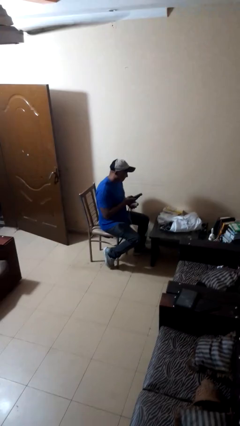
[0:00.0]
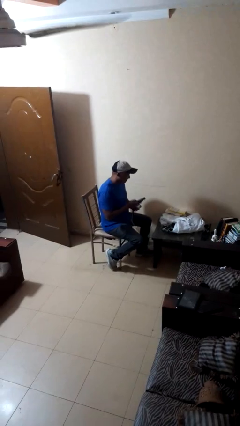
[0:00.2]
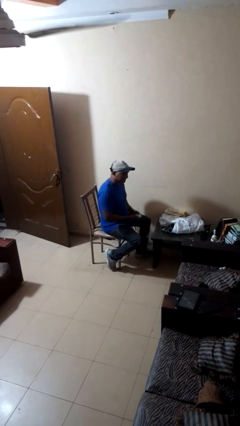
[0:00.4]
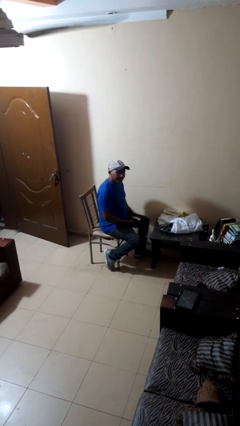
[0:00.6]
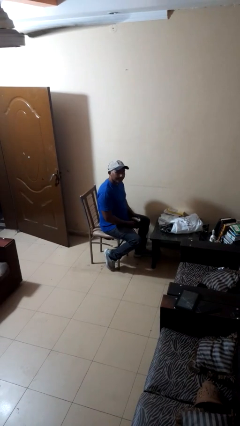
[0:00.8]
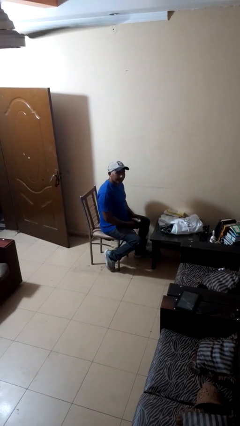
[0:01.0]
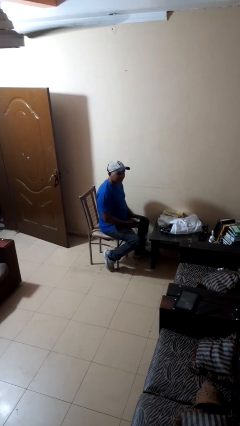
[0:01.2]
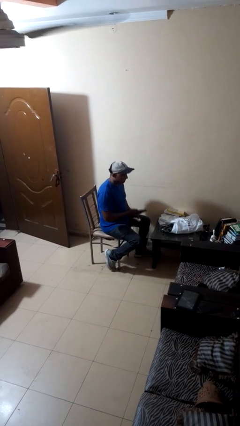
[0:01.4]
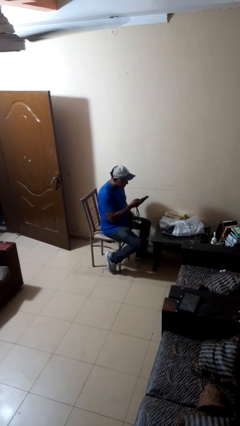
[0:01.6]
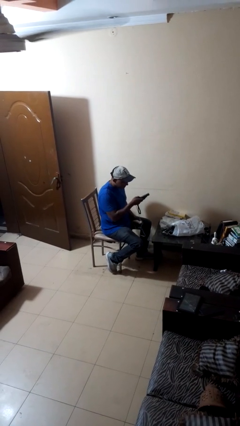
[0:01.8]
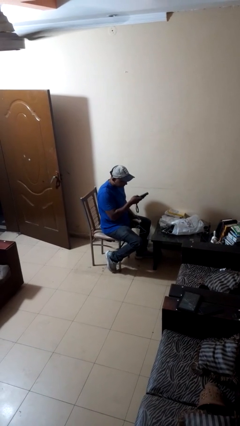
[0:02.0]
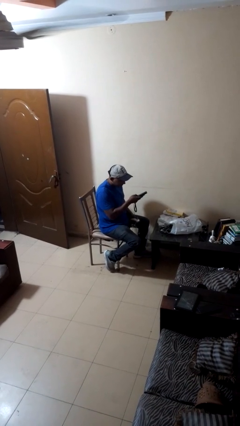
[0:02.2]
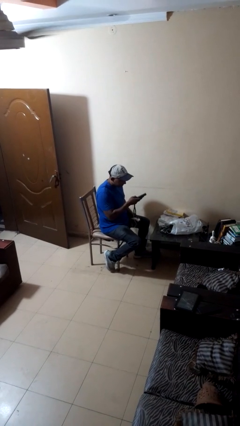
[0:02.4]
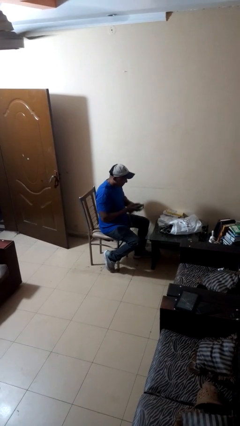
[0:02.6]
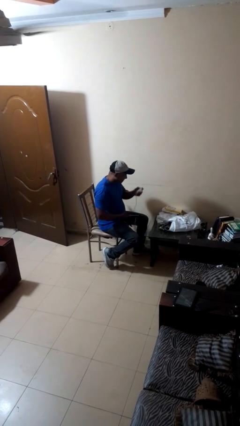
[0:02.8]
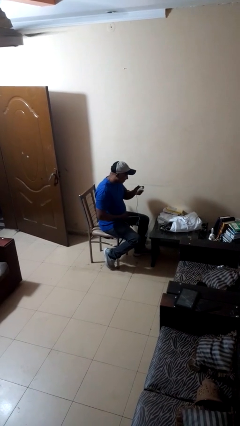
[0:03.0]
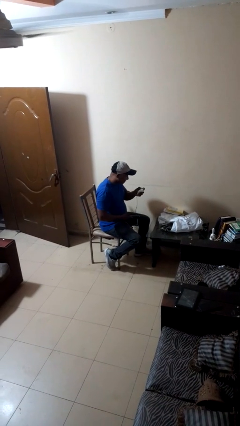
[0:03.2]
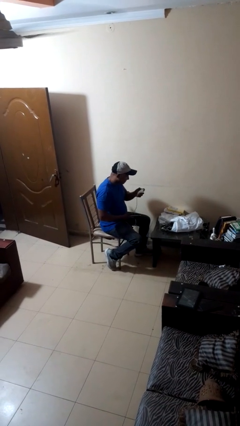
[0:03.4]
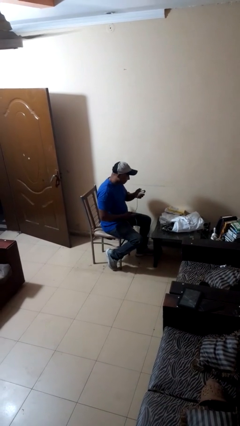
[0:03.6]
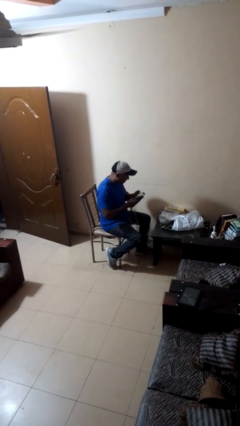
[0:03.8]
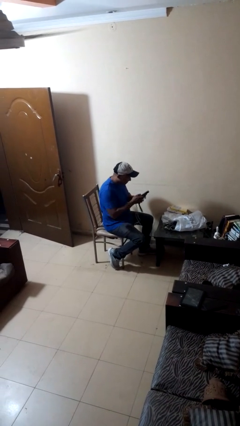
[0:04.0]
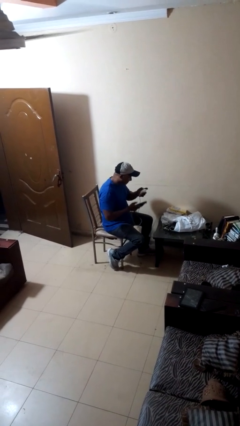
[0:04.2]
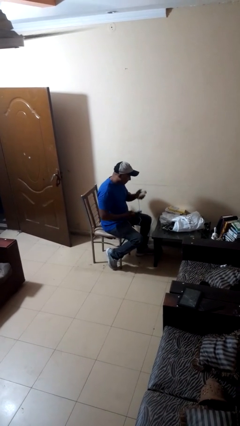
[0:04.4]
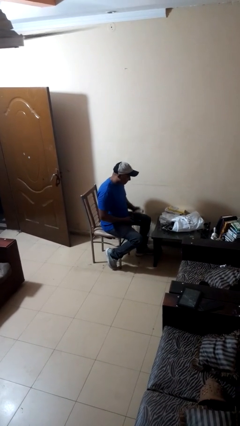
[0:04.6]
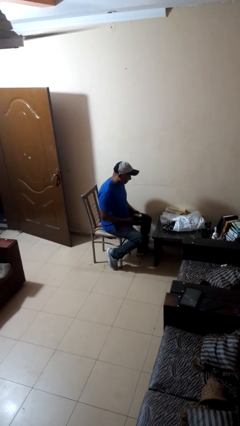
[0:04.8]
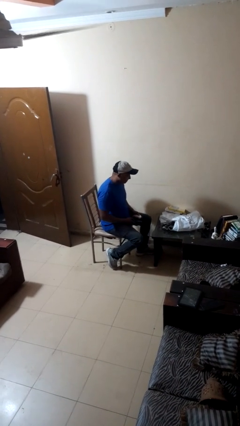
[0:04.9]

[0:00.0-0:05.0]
person interacts with handheld game

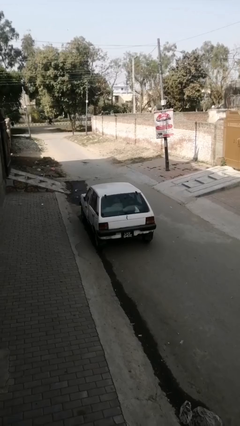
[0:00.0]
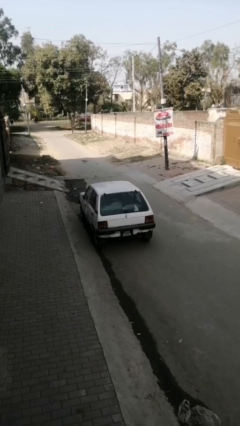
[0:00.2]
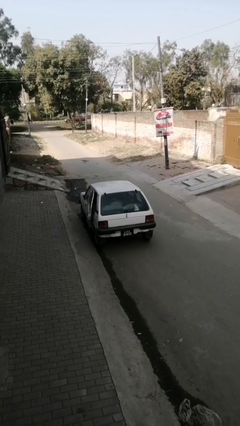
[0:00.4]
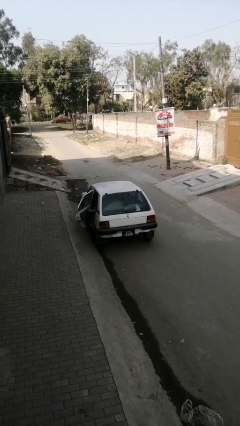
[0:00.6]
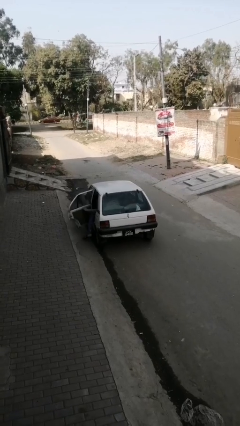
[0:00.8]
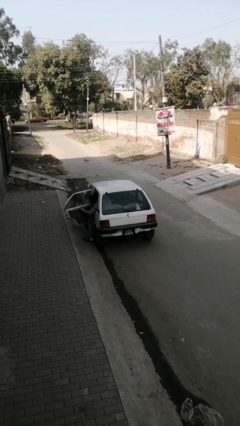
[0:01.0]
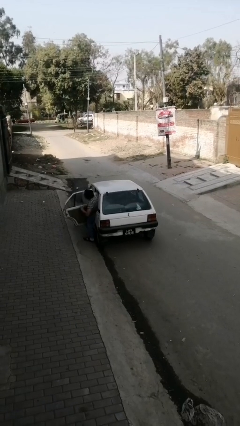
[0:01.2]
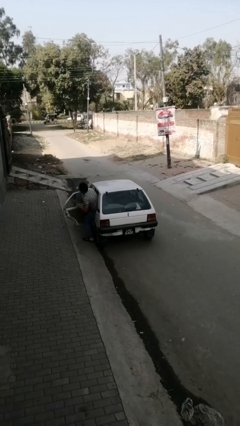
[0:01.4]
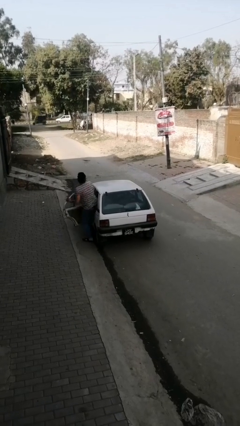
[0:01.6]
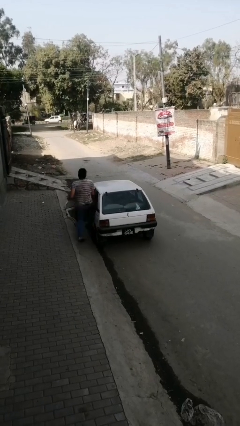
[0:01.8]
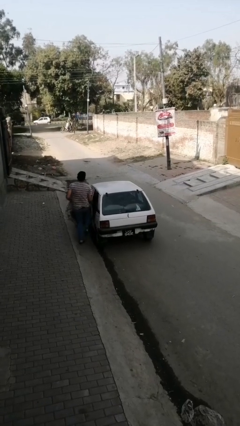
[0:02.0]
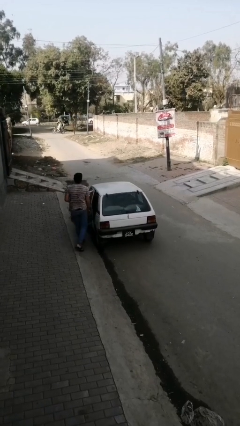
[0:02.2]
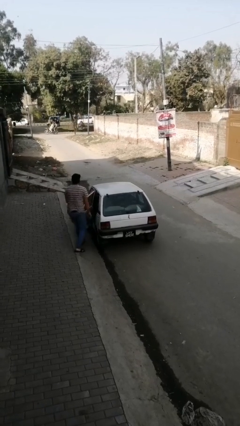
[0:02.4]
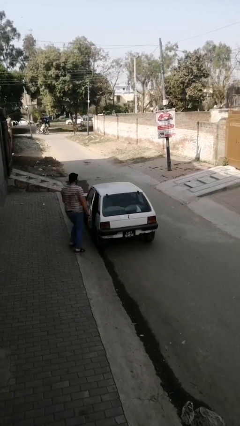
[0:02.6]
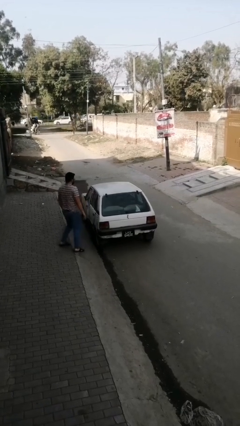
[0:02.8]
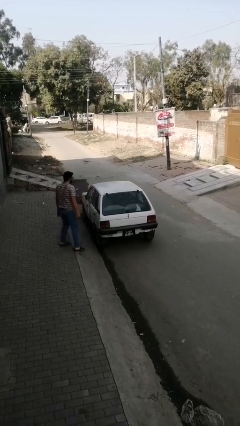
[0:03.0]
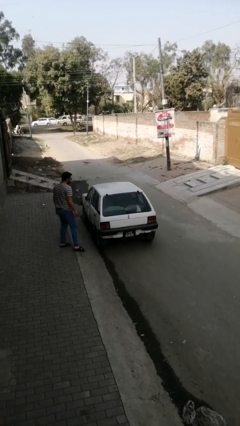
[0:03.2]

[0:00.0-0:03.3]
car drops off person

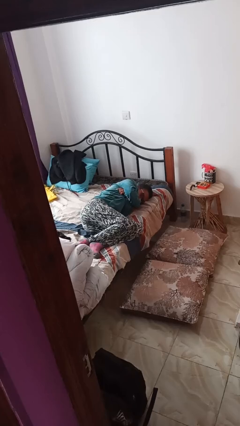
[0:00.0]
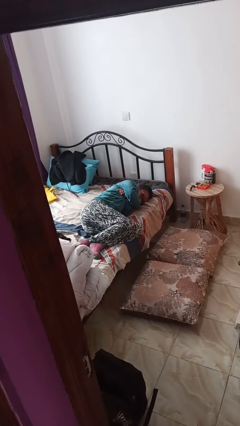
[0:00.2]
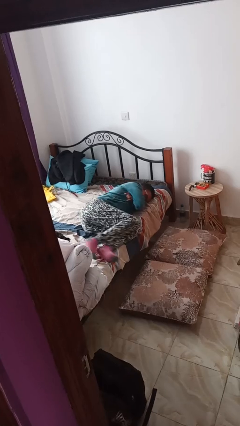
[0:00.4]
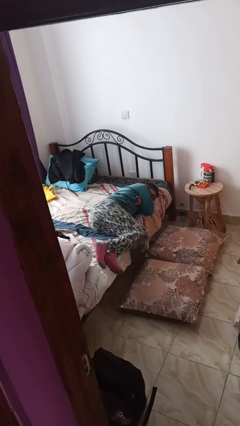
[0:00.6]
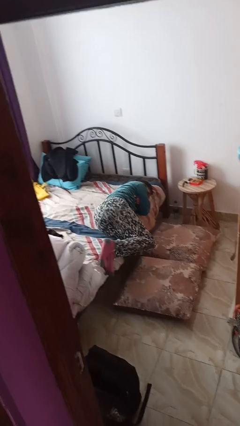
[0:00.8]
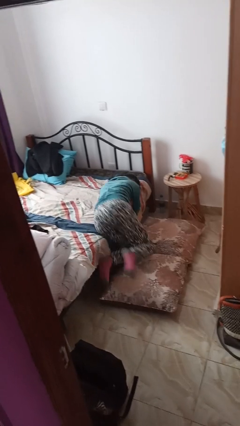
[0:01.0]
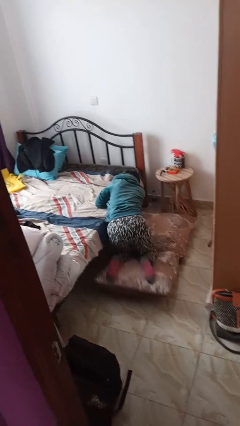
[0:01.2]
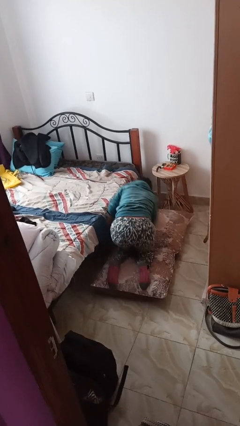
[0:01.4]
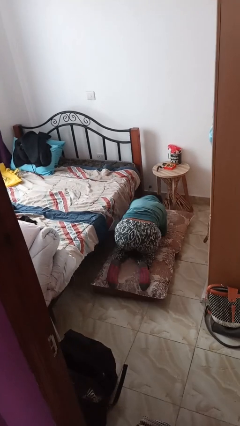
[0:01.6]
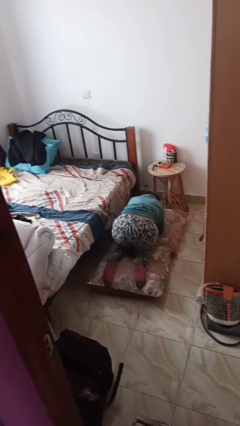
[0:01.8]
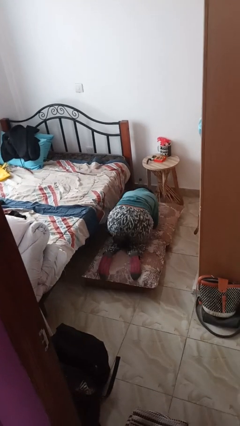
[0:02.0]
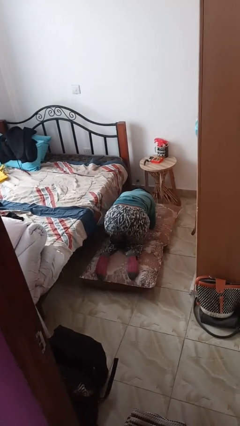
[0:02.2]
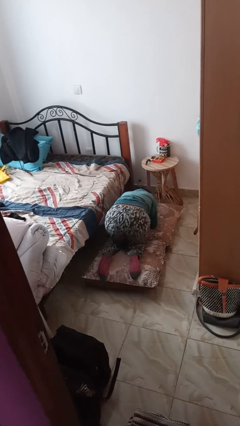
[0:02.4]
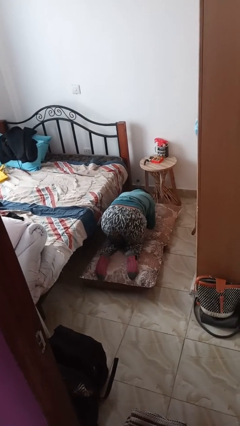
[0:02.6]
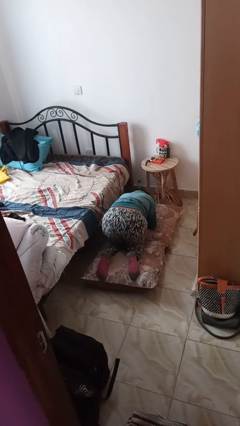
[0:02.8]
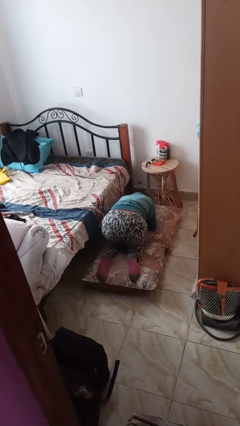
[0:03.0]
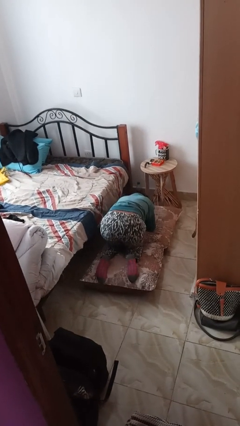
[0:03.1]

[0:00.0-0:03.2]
person falls from bed

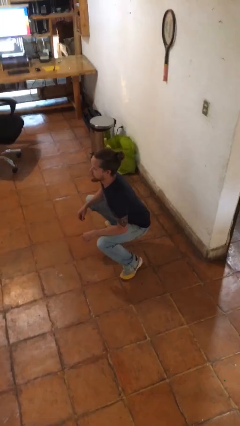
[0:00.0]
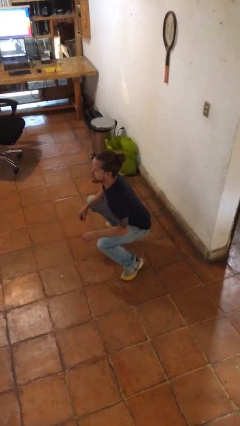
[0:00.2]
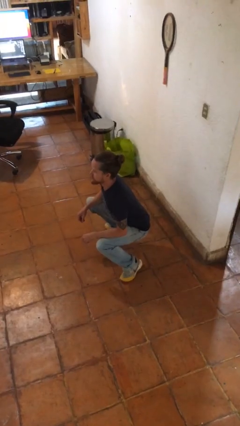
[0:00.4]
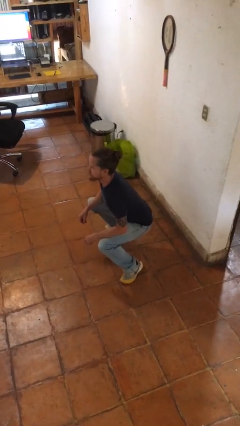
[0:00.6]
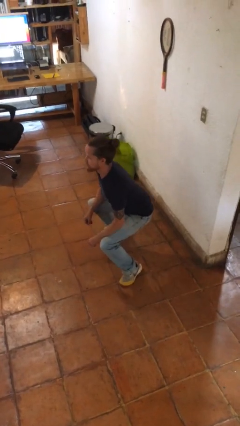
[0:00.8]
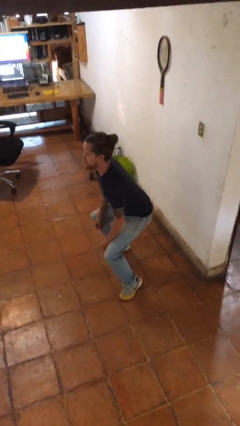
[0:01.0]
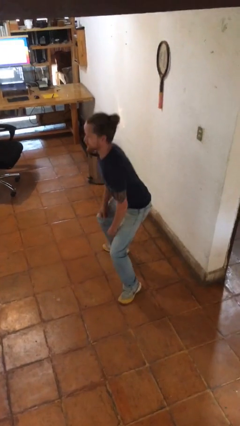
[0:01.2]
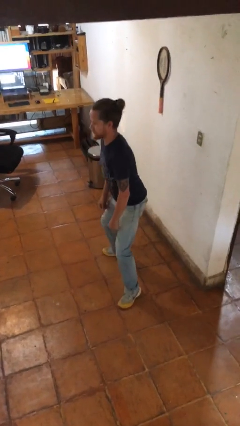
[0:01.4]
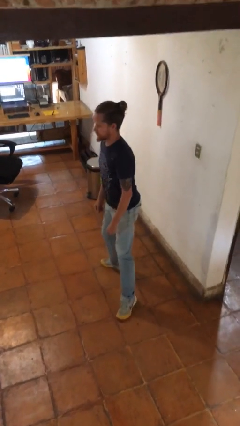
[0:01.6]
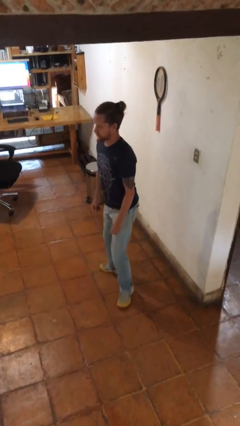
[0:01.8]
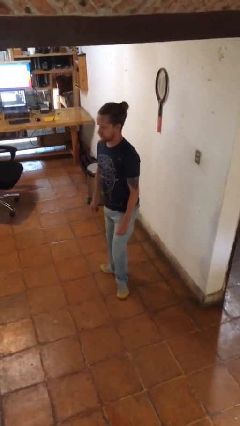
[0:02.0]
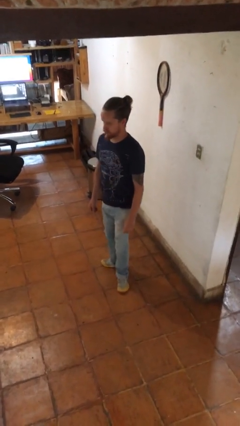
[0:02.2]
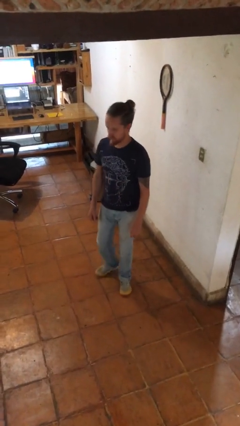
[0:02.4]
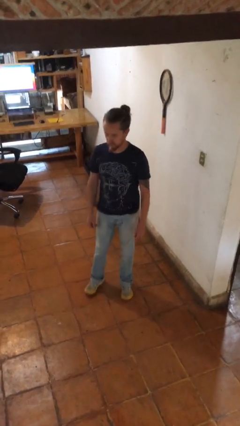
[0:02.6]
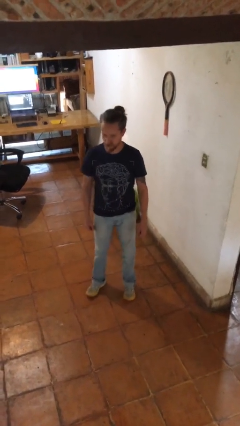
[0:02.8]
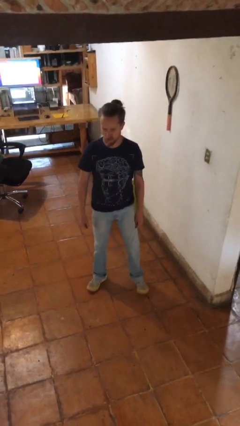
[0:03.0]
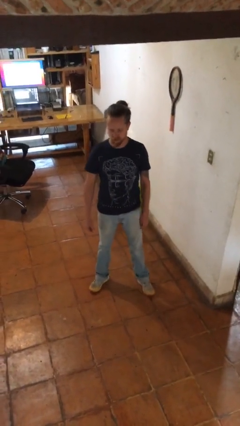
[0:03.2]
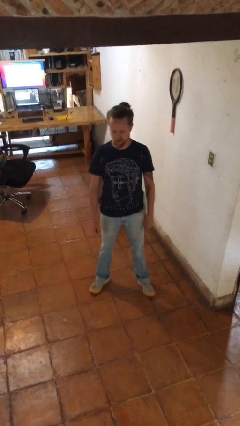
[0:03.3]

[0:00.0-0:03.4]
person stands up

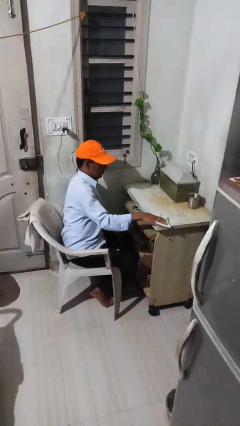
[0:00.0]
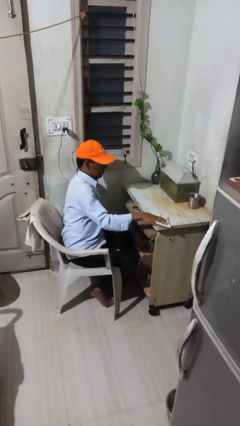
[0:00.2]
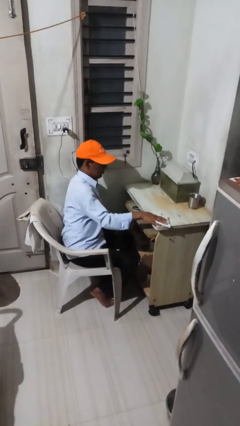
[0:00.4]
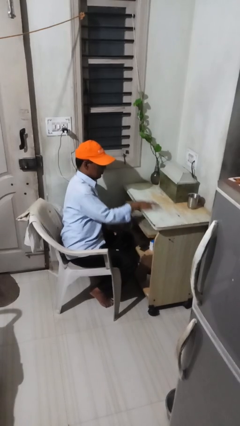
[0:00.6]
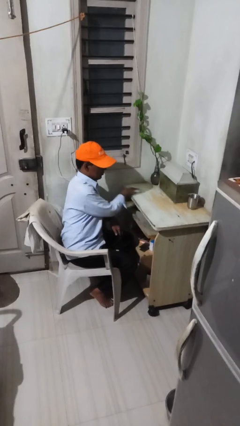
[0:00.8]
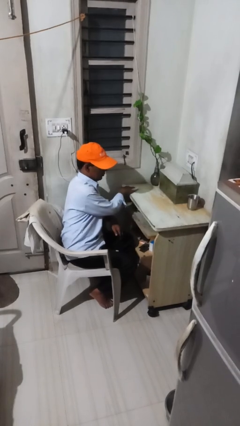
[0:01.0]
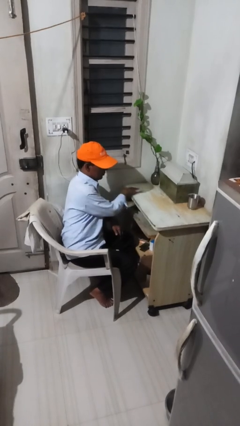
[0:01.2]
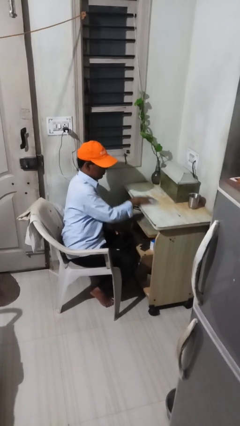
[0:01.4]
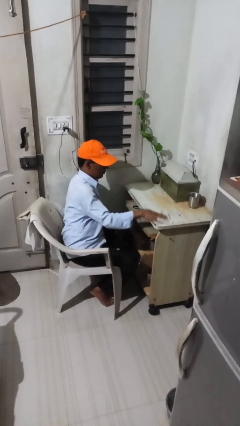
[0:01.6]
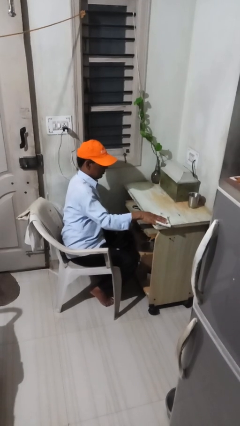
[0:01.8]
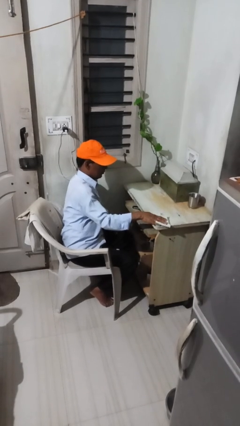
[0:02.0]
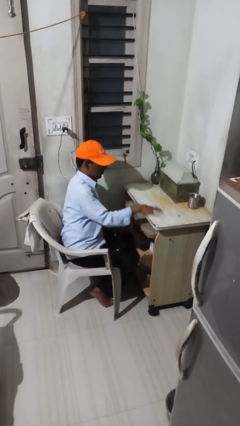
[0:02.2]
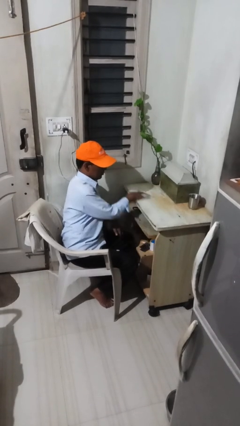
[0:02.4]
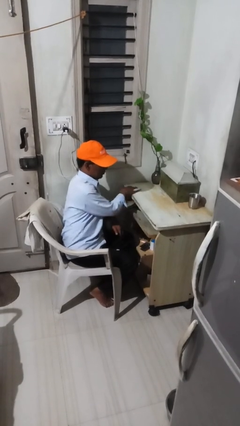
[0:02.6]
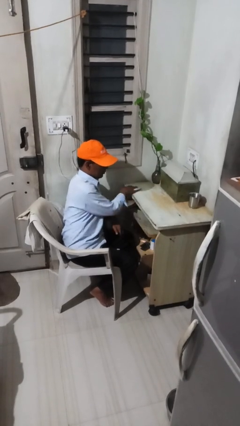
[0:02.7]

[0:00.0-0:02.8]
person cleans table with rag
